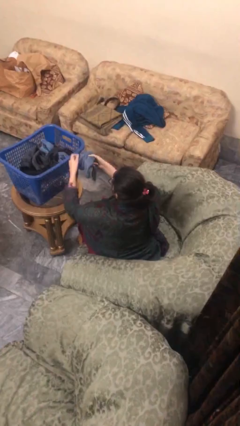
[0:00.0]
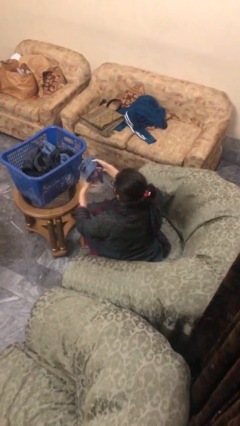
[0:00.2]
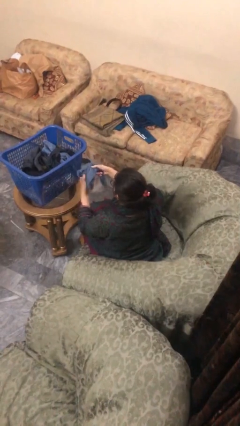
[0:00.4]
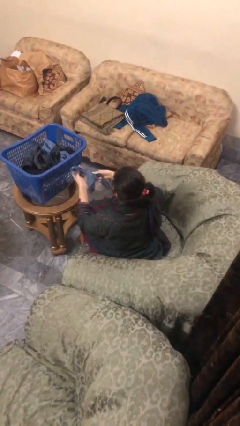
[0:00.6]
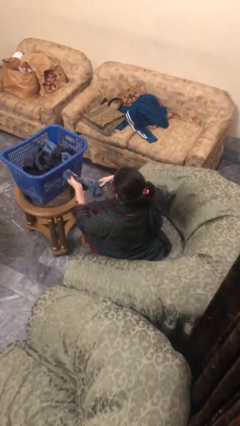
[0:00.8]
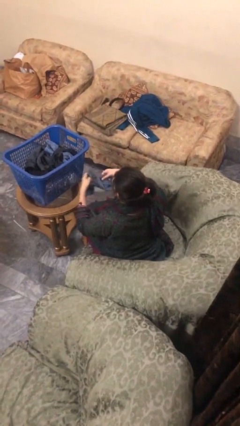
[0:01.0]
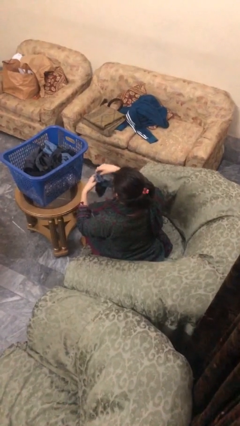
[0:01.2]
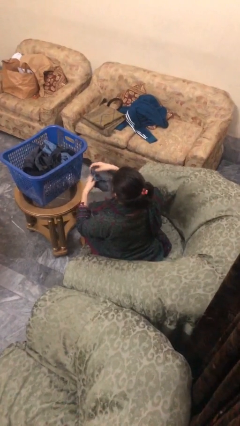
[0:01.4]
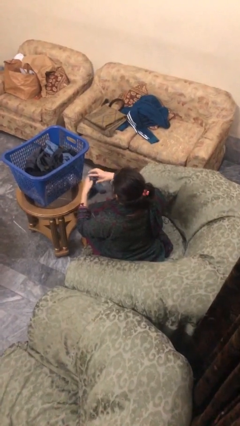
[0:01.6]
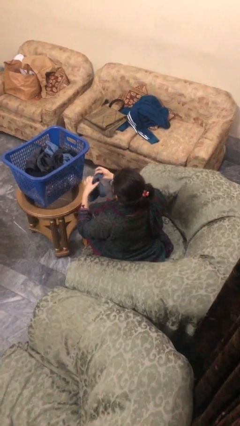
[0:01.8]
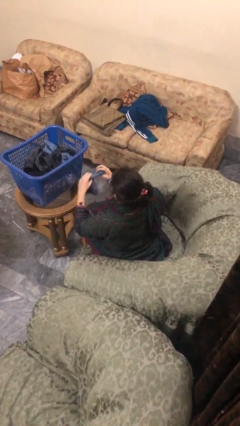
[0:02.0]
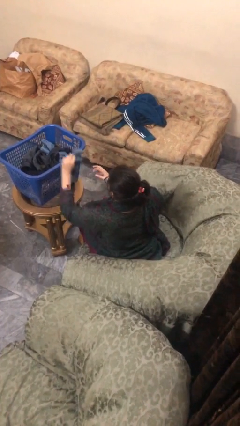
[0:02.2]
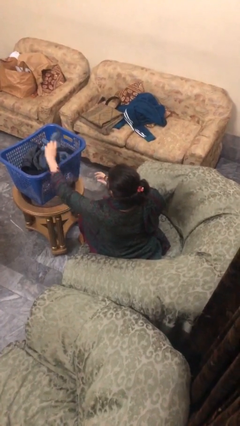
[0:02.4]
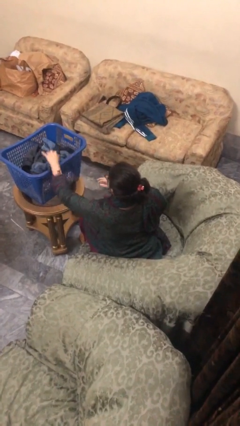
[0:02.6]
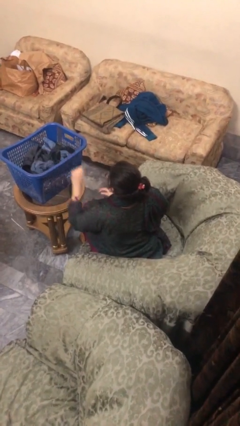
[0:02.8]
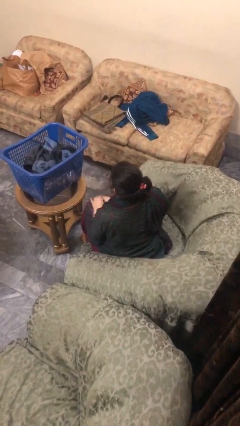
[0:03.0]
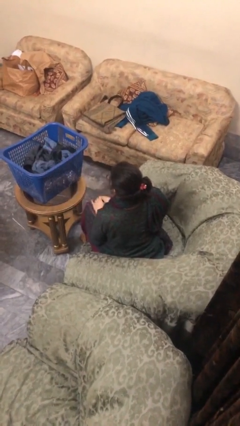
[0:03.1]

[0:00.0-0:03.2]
person folds socks

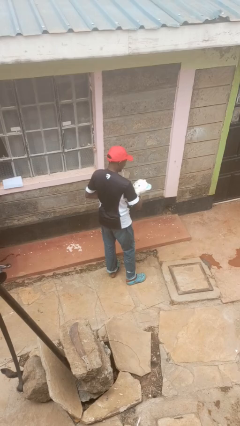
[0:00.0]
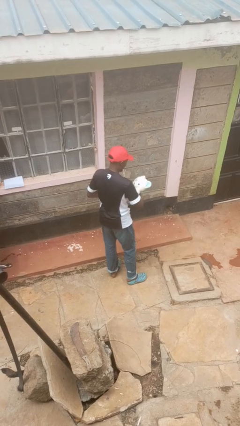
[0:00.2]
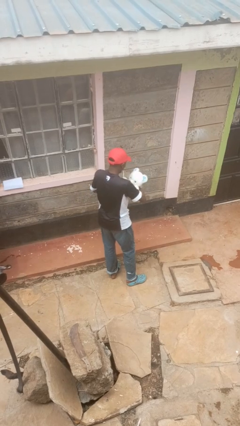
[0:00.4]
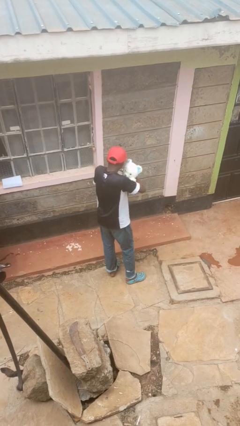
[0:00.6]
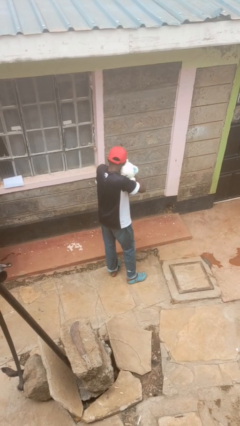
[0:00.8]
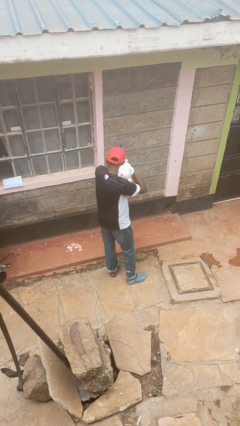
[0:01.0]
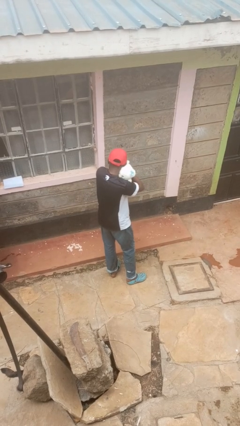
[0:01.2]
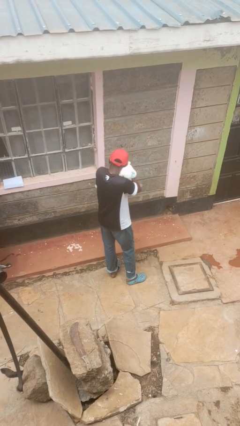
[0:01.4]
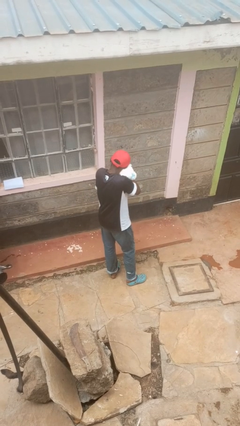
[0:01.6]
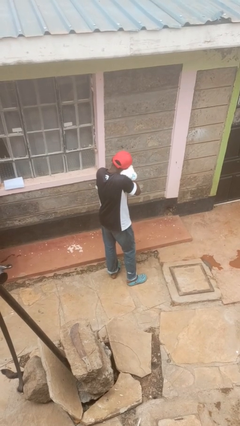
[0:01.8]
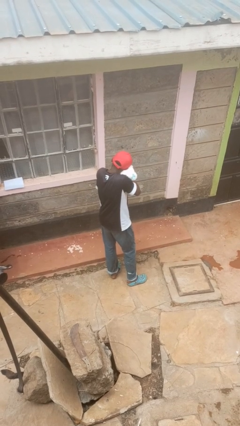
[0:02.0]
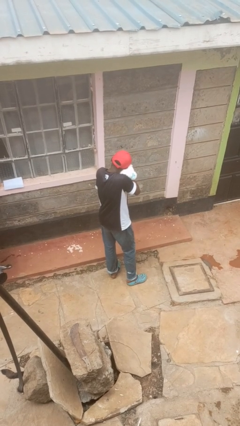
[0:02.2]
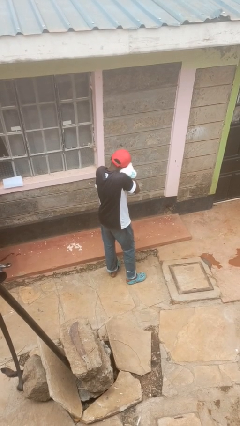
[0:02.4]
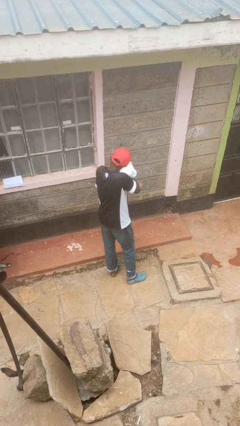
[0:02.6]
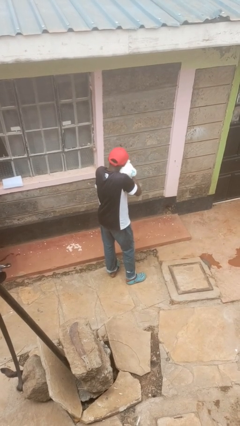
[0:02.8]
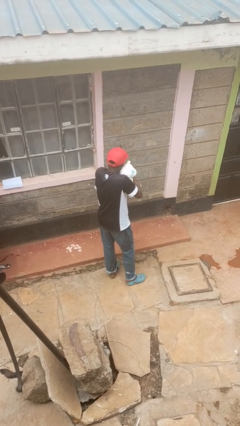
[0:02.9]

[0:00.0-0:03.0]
person hugs stuffed animal

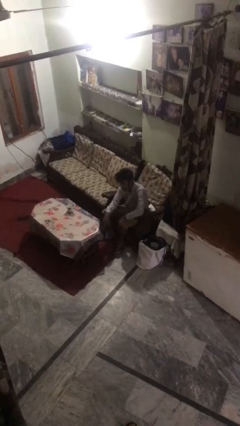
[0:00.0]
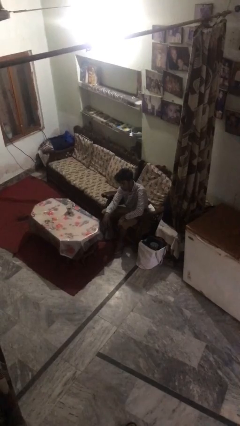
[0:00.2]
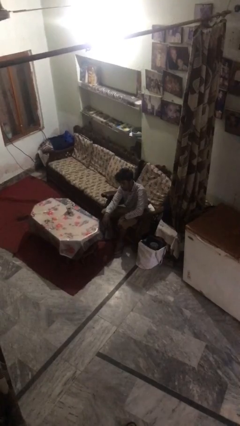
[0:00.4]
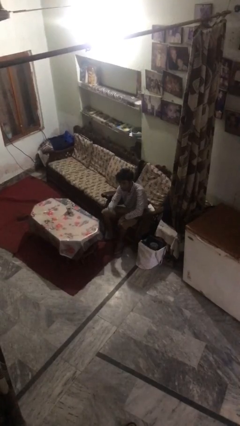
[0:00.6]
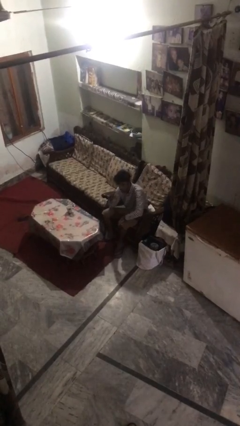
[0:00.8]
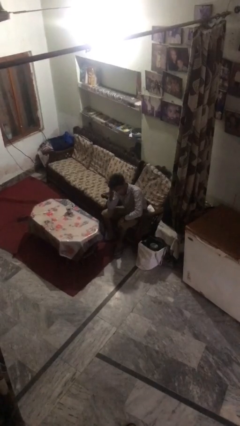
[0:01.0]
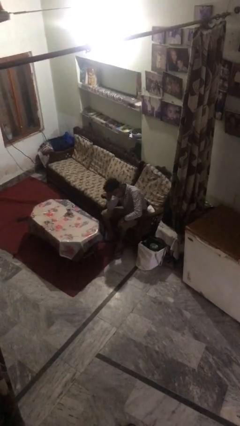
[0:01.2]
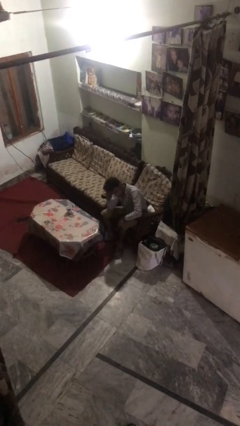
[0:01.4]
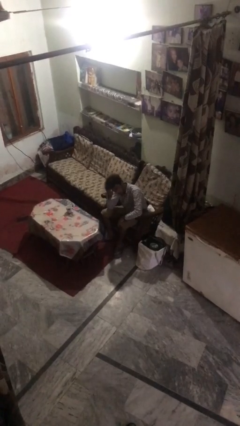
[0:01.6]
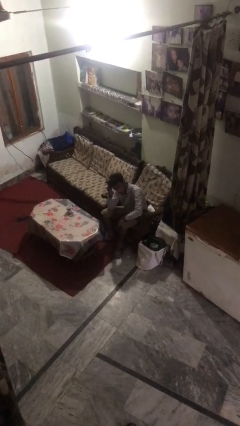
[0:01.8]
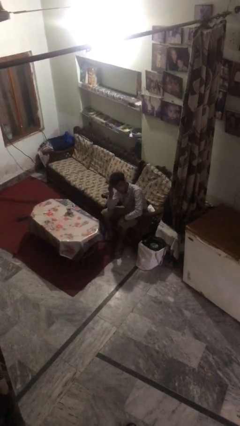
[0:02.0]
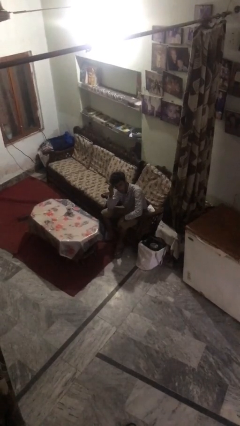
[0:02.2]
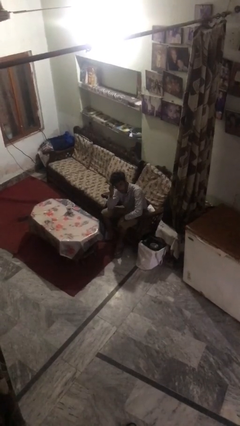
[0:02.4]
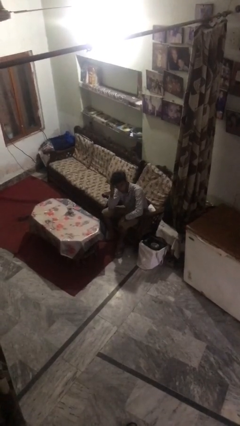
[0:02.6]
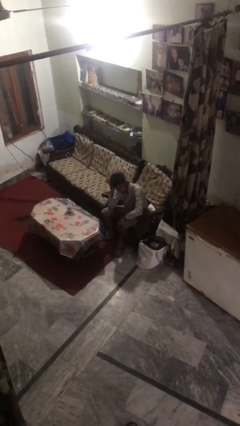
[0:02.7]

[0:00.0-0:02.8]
person strokes hair

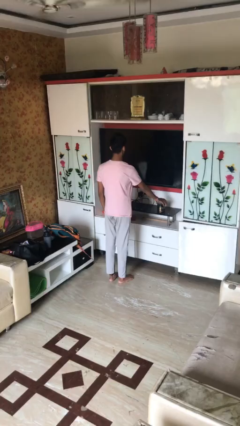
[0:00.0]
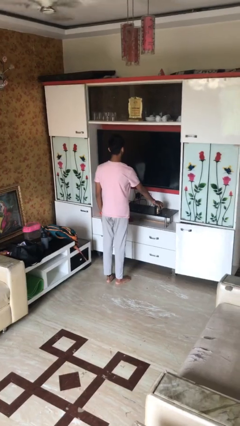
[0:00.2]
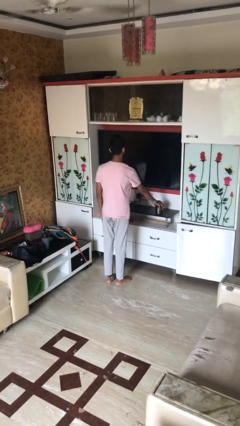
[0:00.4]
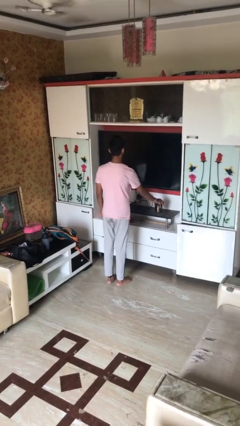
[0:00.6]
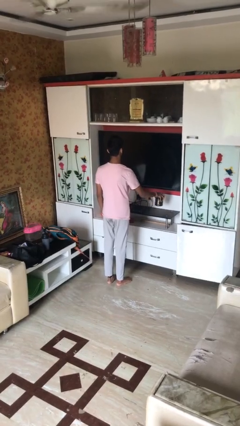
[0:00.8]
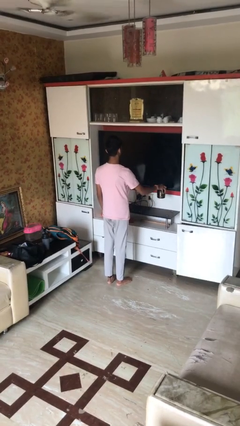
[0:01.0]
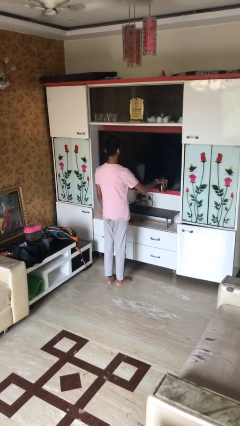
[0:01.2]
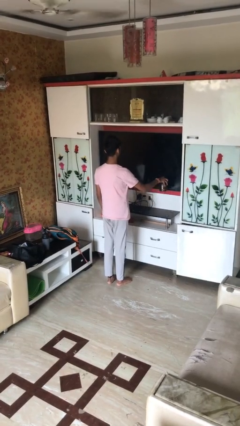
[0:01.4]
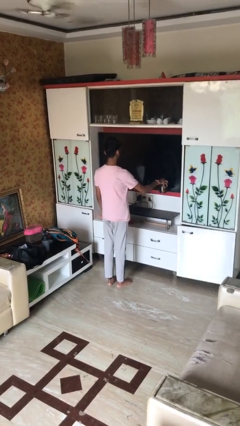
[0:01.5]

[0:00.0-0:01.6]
person picks up object from countertop

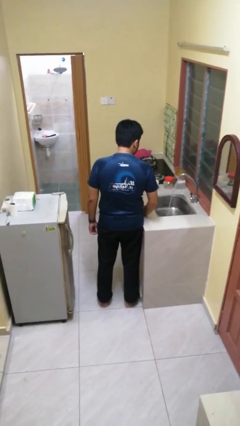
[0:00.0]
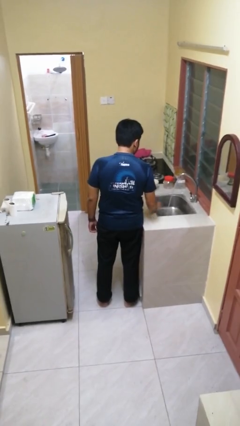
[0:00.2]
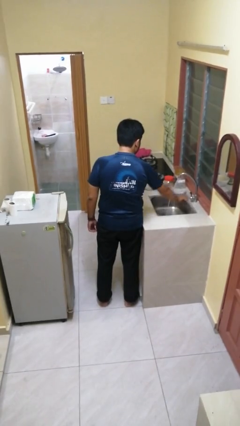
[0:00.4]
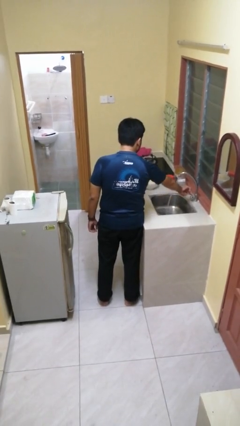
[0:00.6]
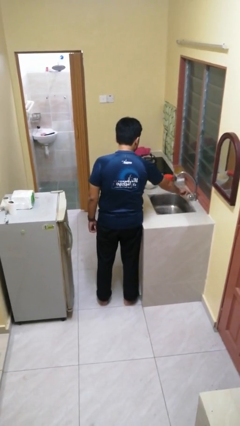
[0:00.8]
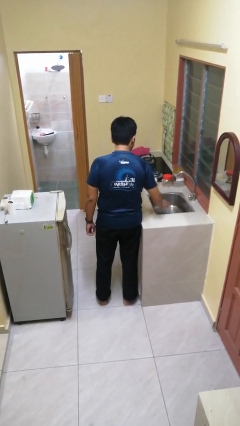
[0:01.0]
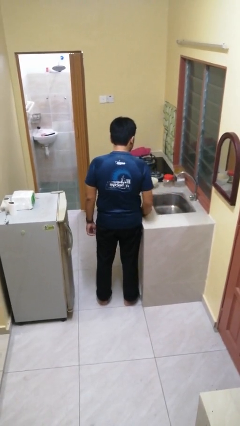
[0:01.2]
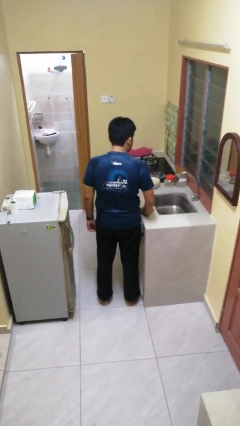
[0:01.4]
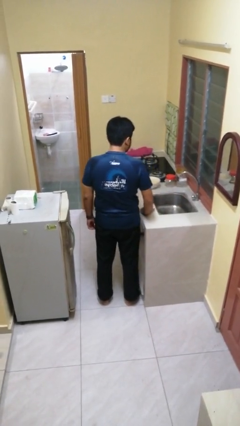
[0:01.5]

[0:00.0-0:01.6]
person turns off faucet

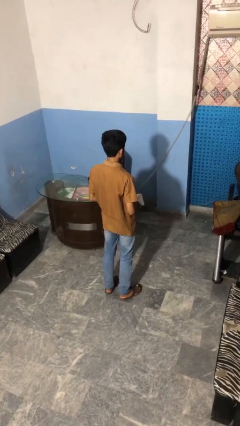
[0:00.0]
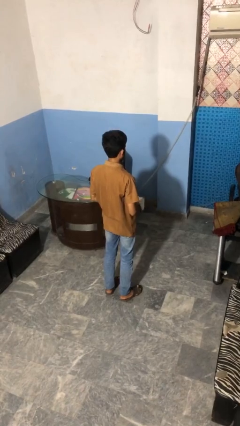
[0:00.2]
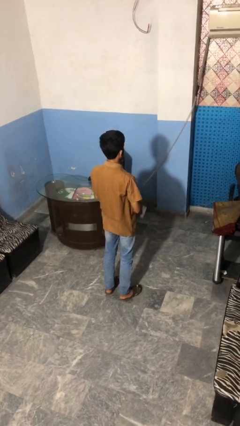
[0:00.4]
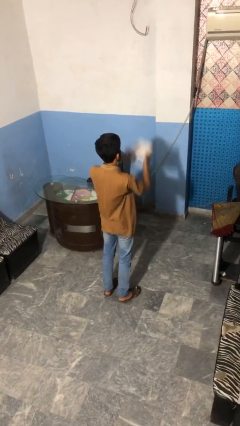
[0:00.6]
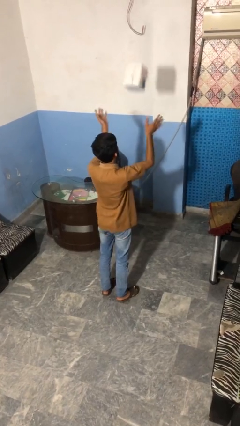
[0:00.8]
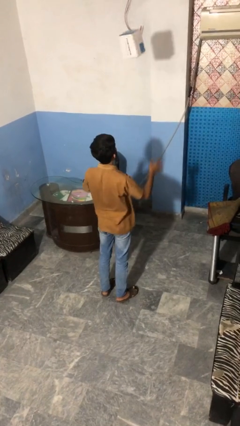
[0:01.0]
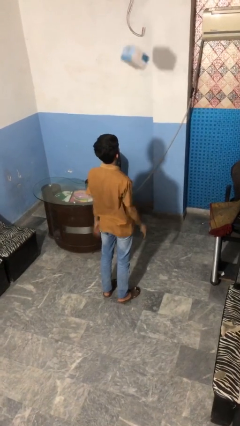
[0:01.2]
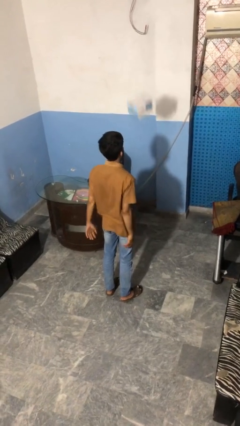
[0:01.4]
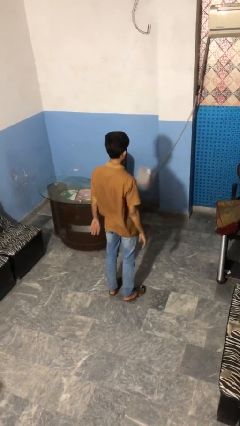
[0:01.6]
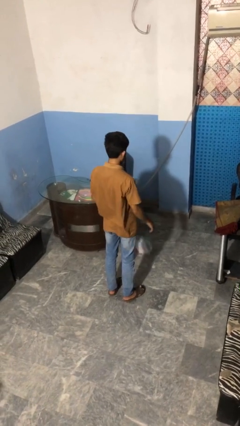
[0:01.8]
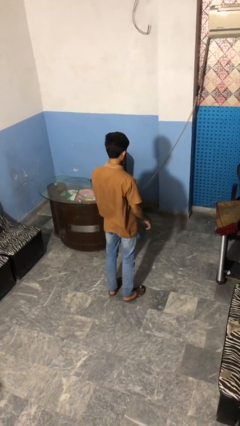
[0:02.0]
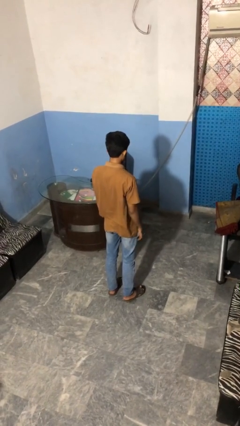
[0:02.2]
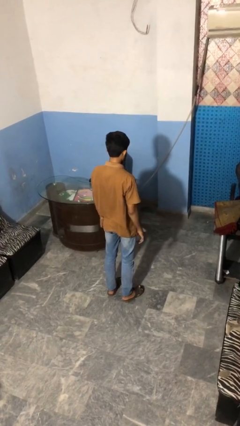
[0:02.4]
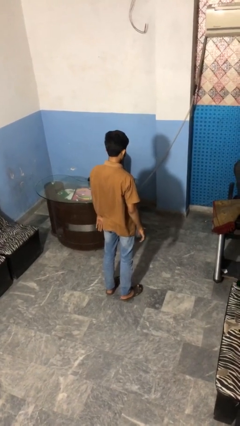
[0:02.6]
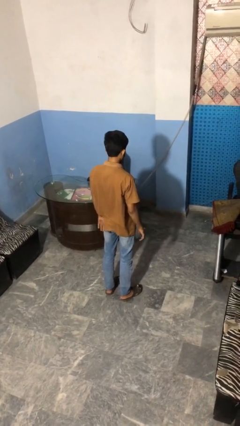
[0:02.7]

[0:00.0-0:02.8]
person throws object into air

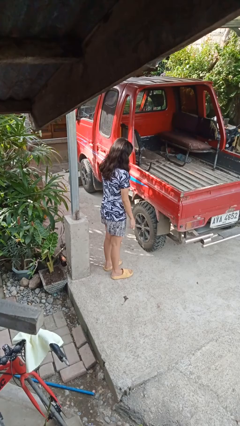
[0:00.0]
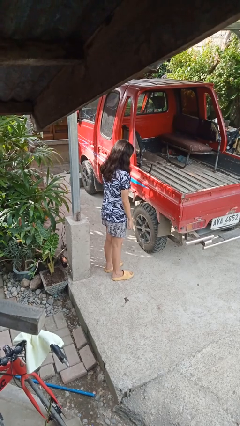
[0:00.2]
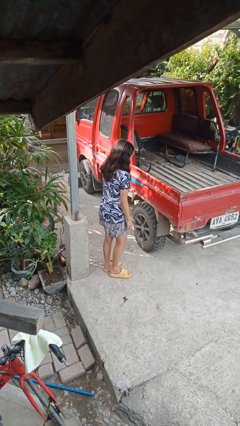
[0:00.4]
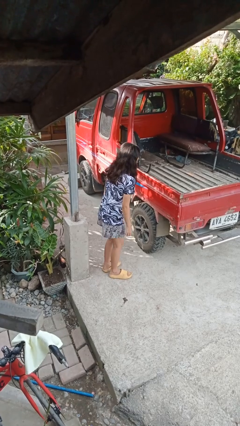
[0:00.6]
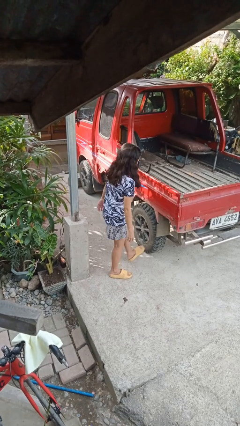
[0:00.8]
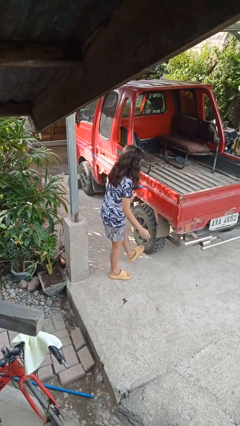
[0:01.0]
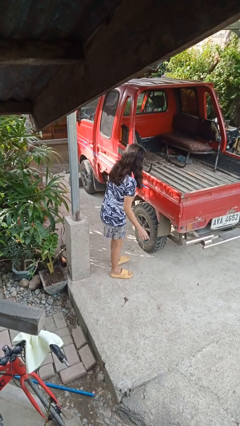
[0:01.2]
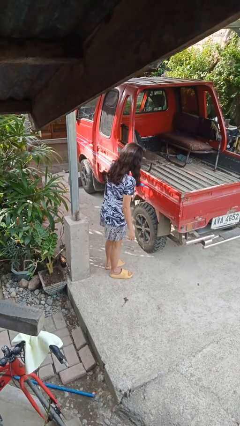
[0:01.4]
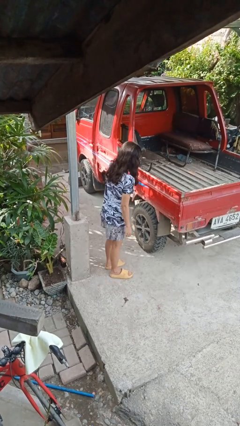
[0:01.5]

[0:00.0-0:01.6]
person kicks car tires

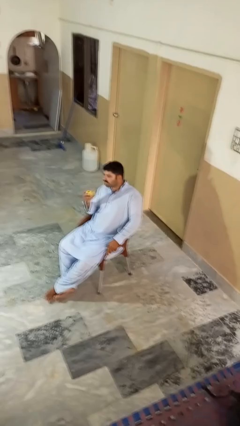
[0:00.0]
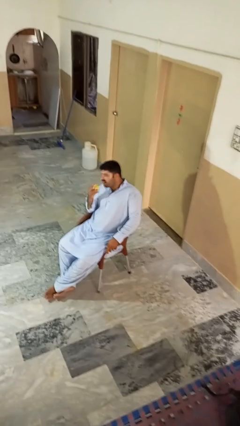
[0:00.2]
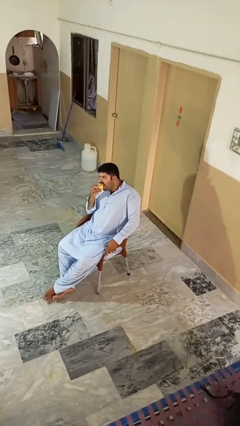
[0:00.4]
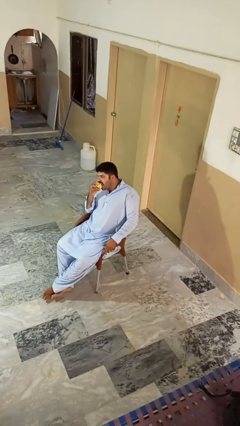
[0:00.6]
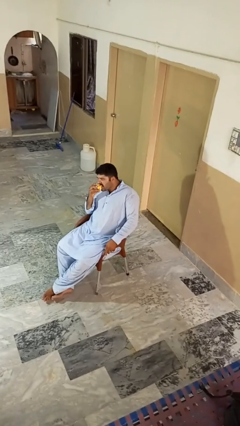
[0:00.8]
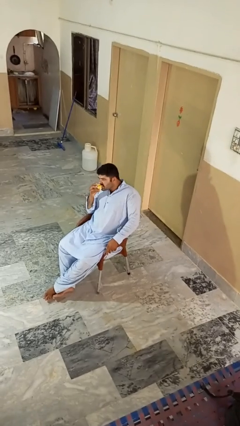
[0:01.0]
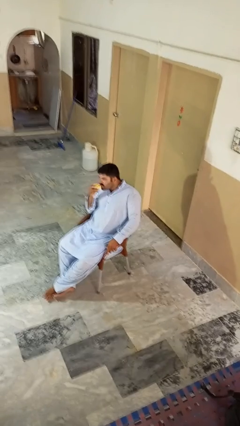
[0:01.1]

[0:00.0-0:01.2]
person eats apple
